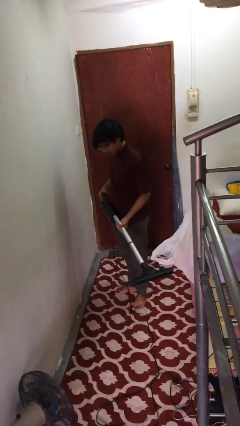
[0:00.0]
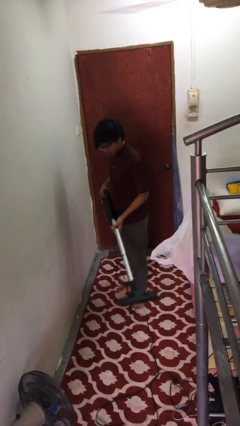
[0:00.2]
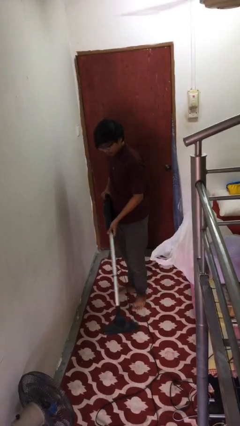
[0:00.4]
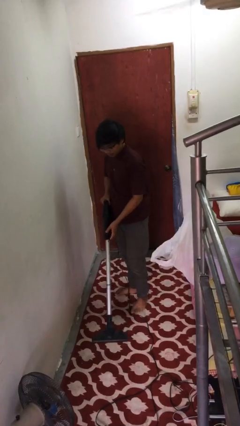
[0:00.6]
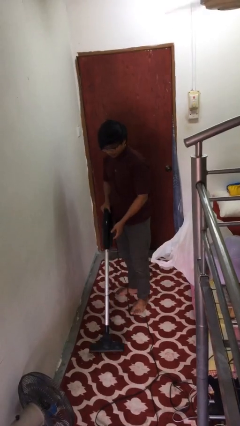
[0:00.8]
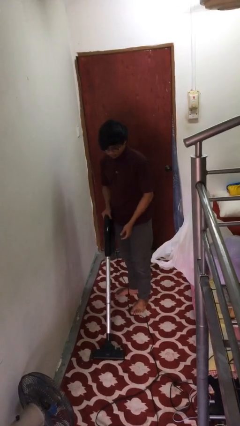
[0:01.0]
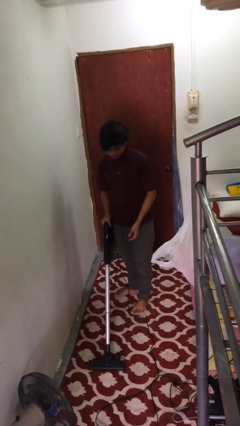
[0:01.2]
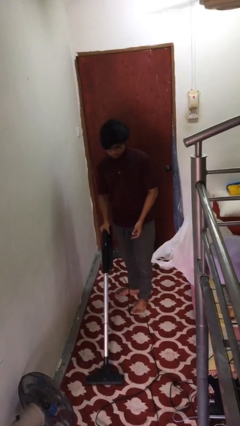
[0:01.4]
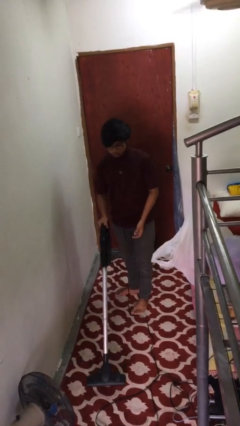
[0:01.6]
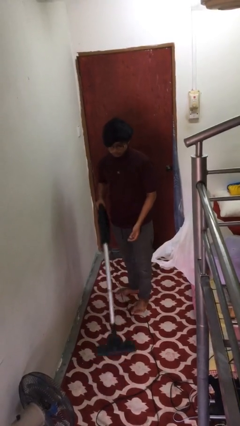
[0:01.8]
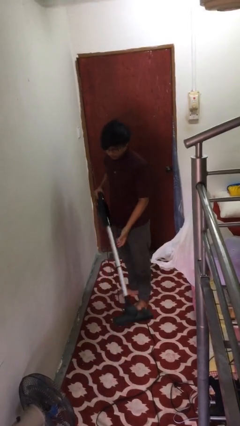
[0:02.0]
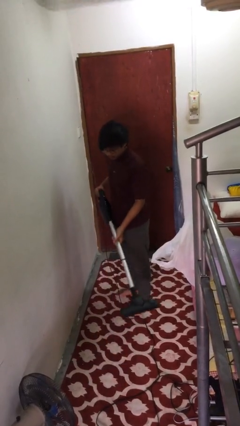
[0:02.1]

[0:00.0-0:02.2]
person vacuums carpet

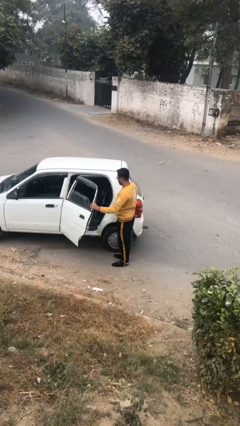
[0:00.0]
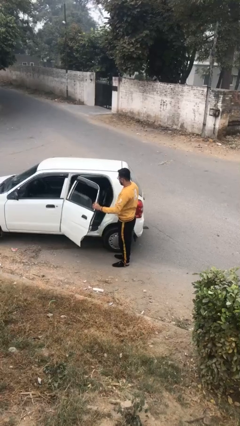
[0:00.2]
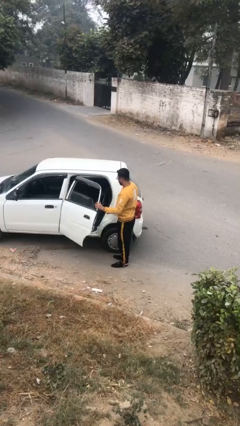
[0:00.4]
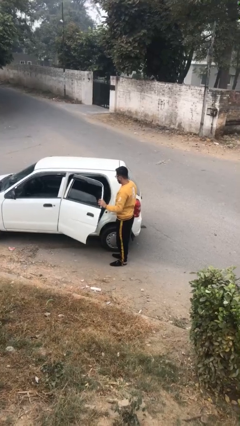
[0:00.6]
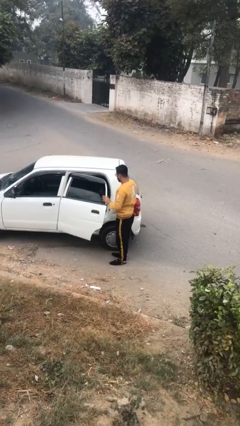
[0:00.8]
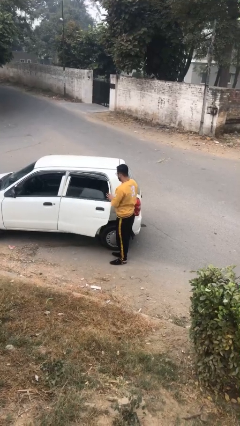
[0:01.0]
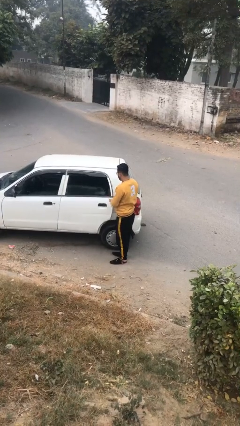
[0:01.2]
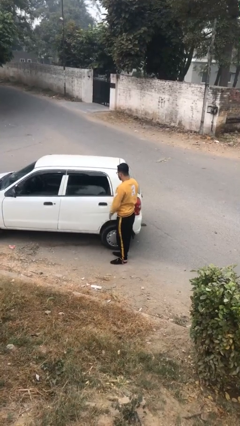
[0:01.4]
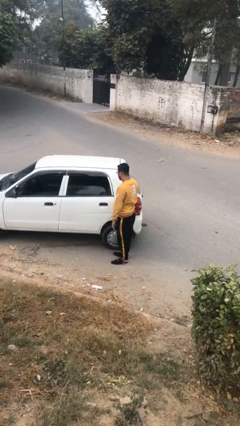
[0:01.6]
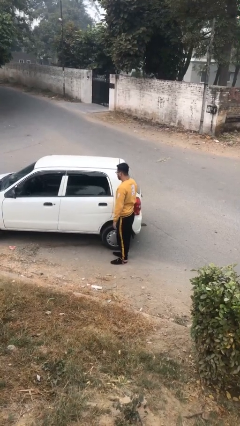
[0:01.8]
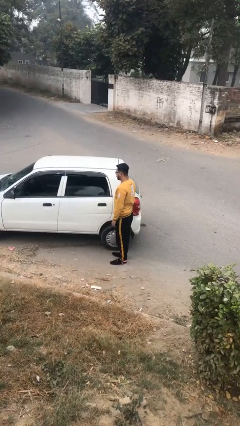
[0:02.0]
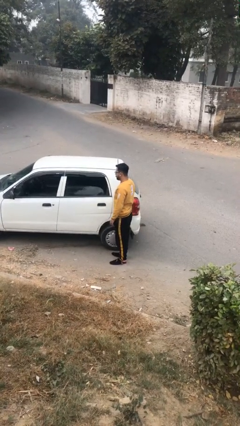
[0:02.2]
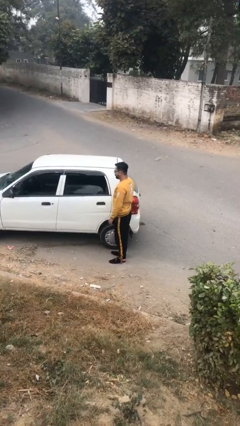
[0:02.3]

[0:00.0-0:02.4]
person closes car door

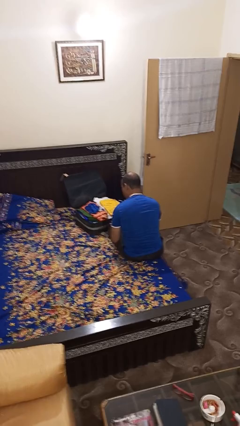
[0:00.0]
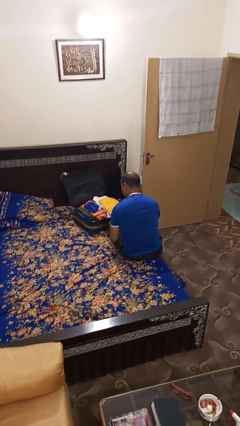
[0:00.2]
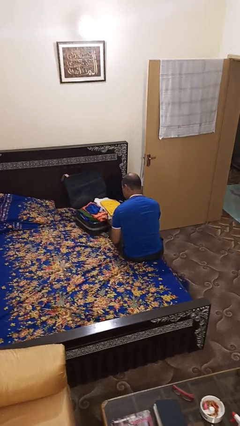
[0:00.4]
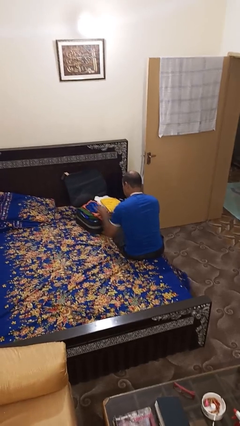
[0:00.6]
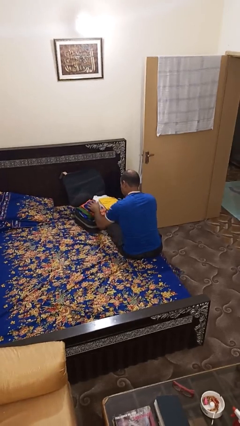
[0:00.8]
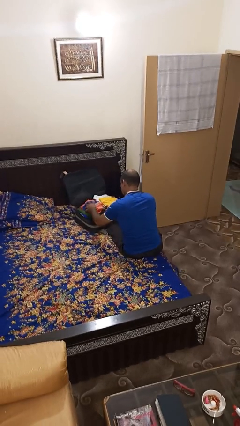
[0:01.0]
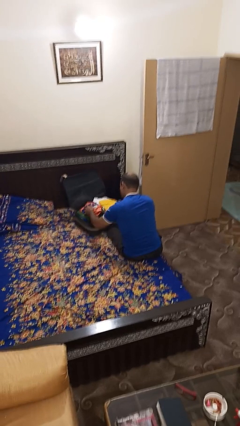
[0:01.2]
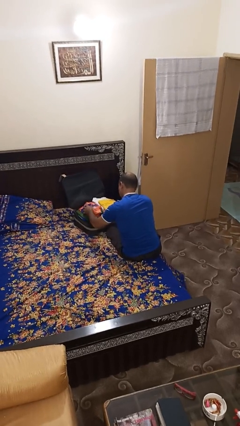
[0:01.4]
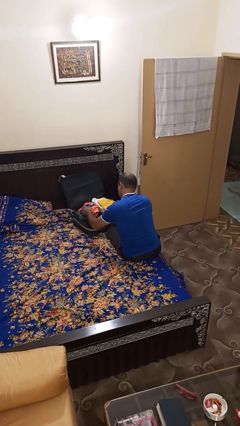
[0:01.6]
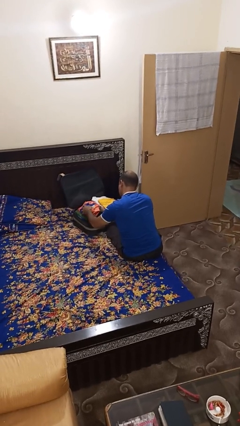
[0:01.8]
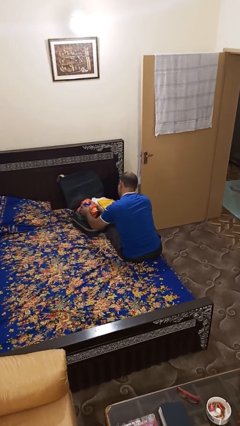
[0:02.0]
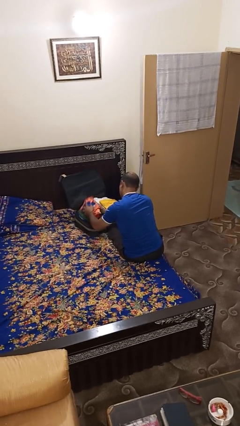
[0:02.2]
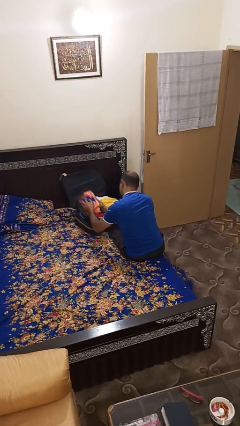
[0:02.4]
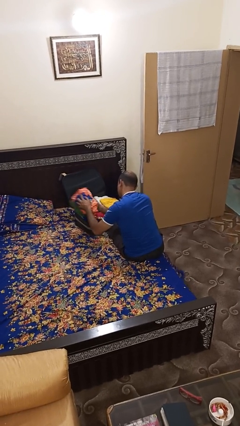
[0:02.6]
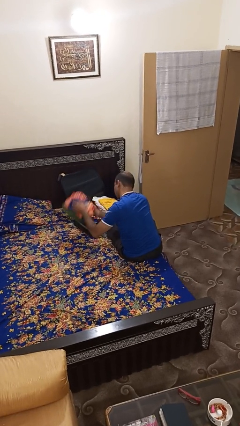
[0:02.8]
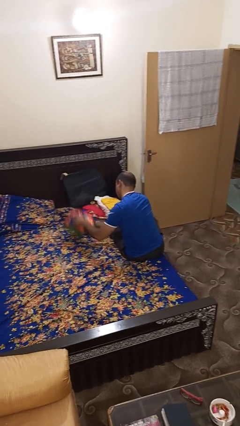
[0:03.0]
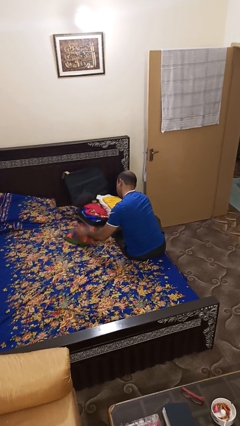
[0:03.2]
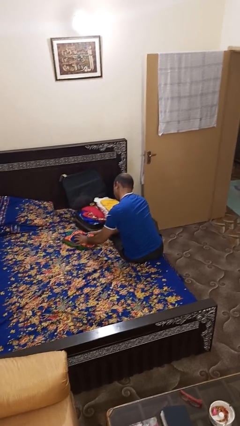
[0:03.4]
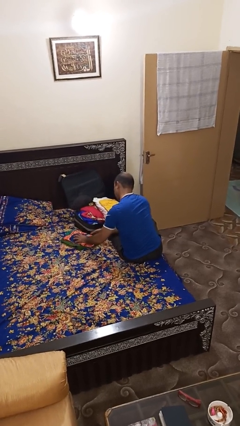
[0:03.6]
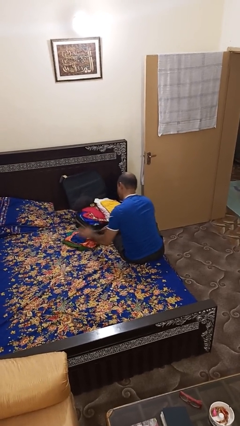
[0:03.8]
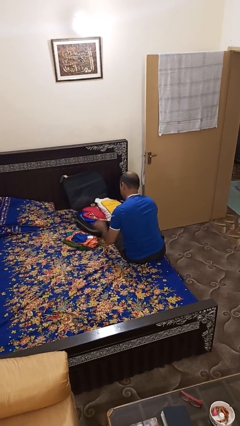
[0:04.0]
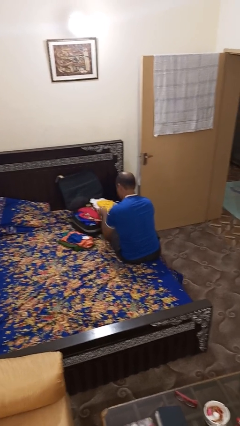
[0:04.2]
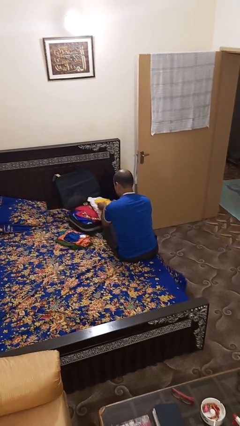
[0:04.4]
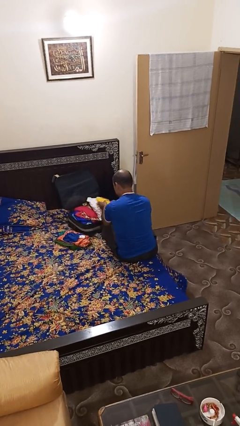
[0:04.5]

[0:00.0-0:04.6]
person unloads clothes from suitcase

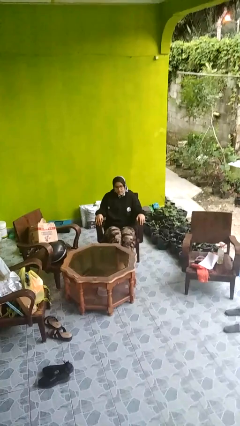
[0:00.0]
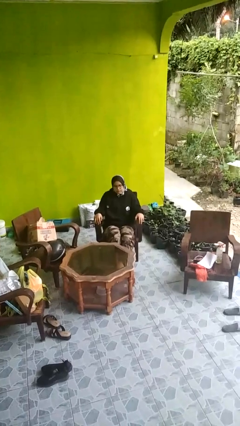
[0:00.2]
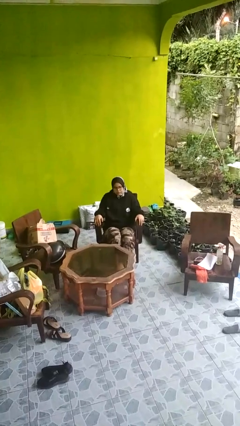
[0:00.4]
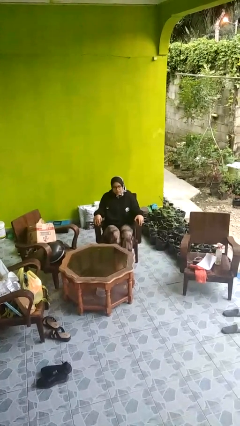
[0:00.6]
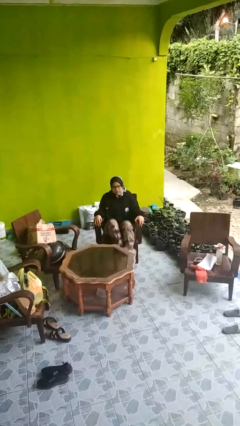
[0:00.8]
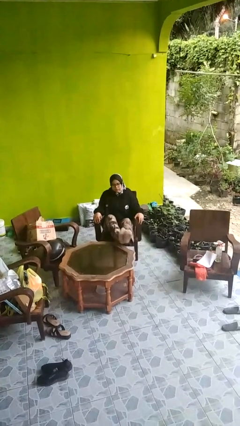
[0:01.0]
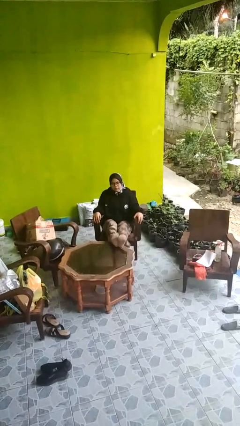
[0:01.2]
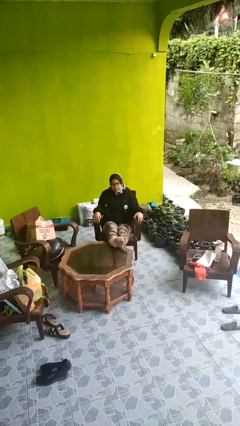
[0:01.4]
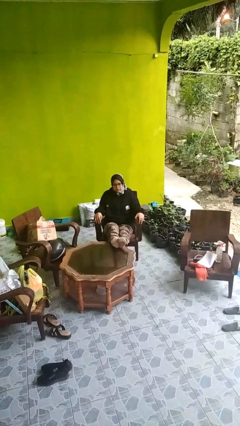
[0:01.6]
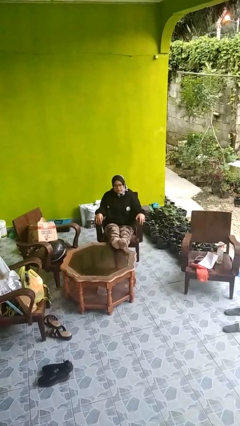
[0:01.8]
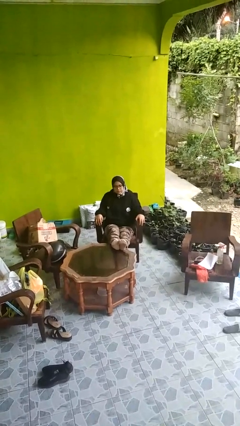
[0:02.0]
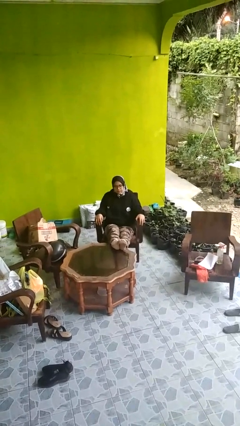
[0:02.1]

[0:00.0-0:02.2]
person puts feet up

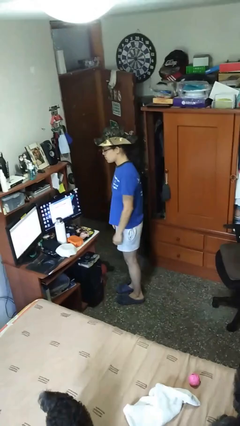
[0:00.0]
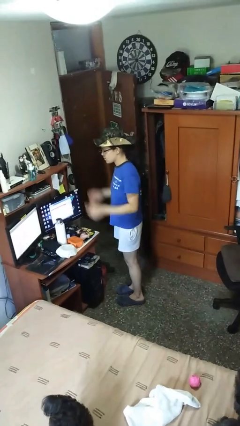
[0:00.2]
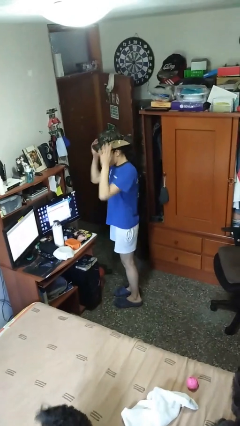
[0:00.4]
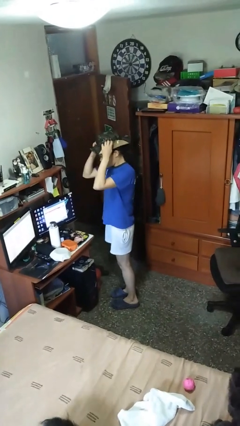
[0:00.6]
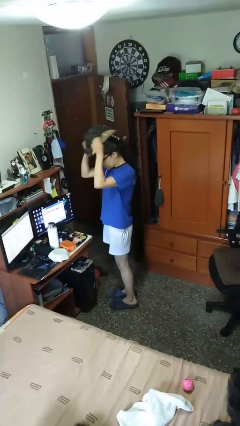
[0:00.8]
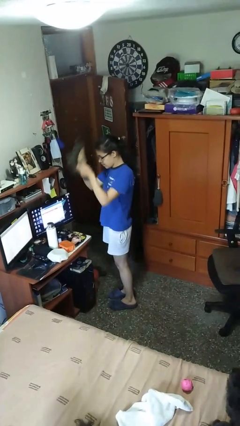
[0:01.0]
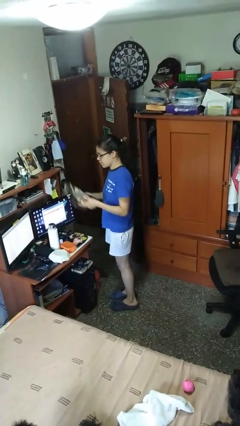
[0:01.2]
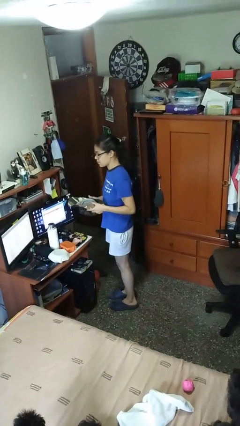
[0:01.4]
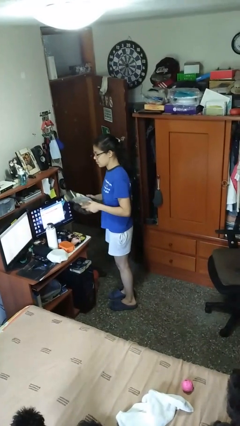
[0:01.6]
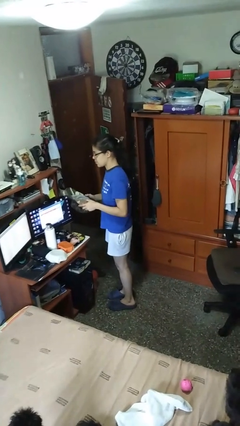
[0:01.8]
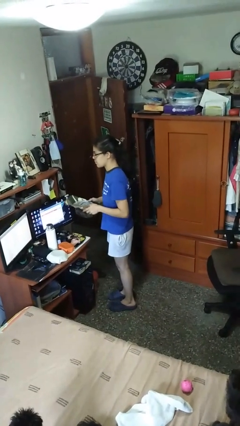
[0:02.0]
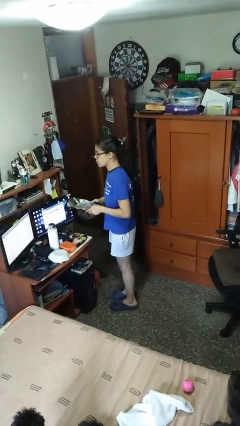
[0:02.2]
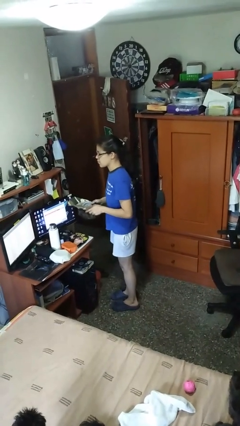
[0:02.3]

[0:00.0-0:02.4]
person takes off hat

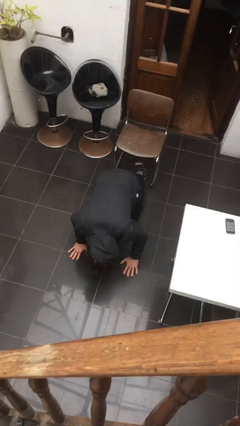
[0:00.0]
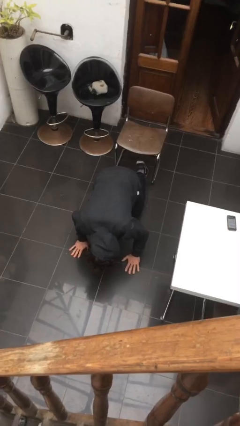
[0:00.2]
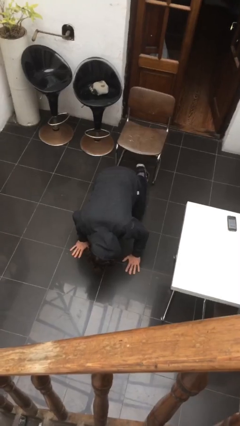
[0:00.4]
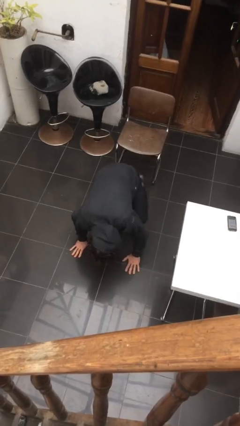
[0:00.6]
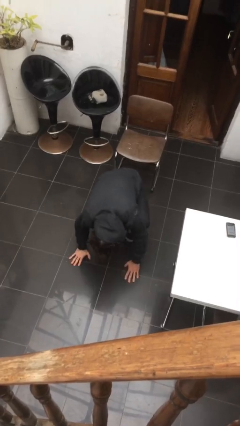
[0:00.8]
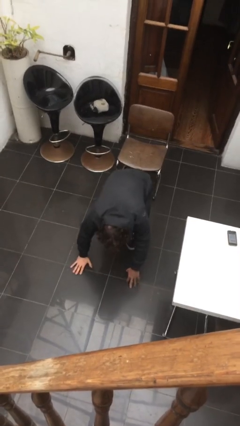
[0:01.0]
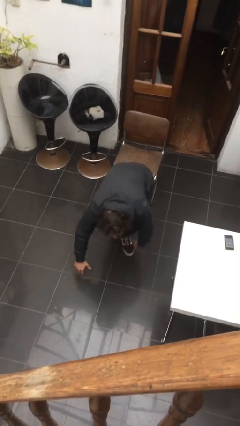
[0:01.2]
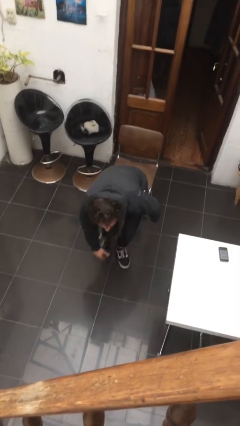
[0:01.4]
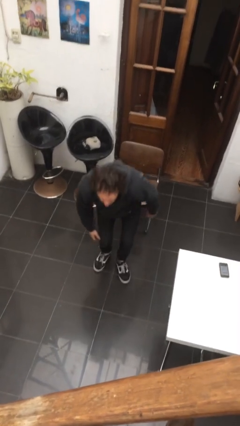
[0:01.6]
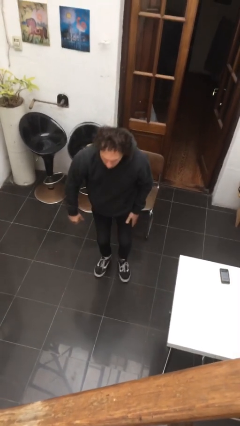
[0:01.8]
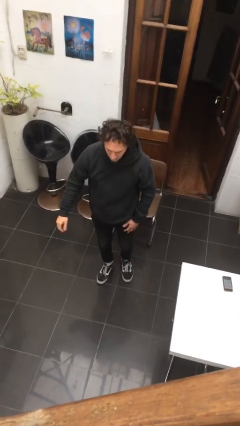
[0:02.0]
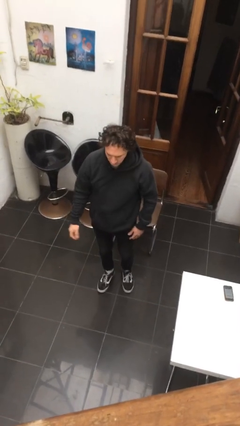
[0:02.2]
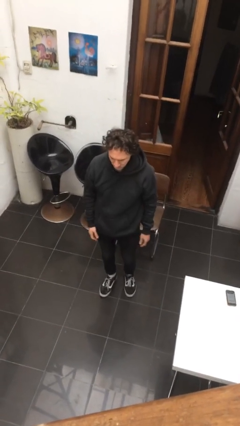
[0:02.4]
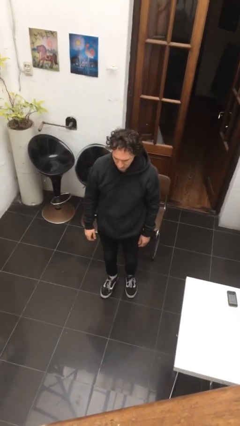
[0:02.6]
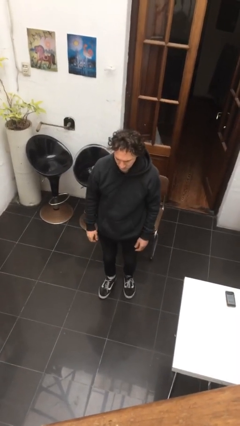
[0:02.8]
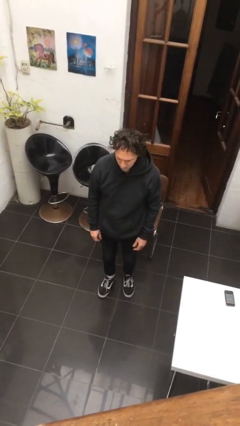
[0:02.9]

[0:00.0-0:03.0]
person stands up from floor

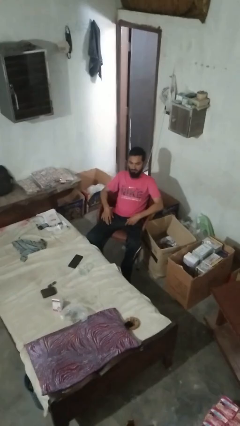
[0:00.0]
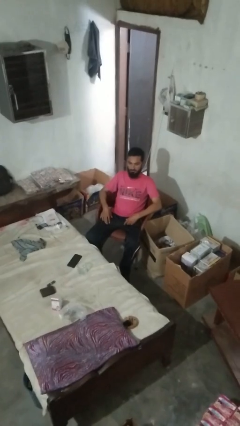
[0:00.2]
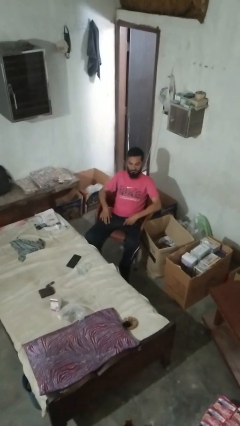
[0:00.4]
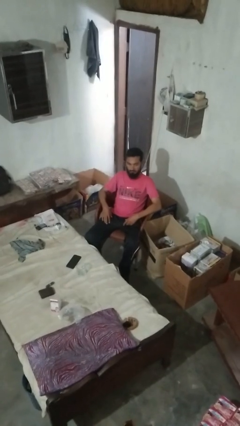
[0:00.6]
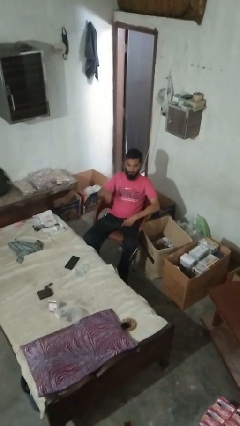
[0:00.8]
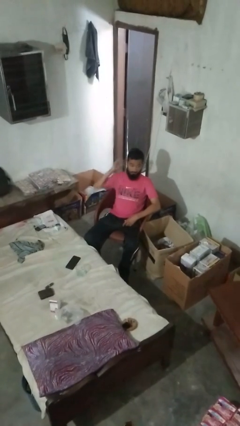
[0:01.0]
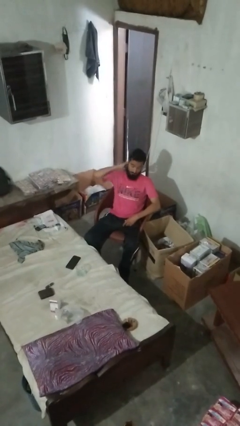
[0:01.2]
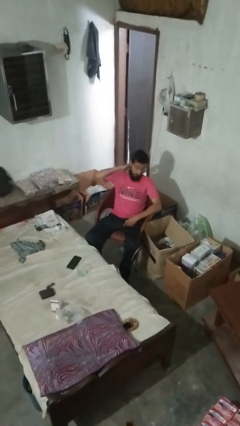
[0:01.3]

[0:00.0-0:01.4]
person shakes head
